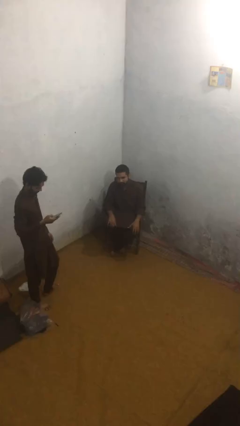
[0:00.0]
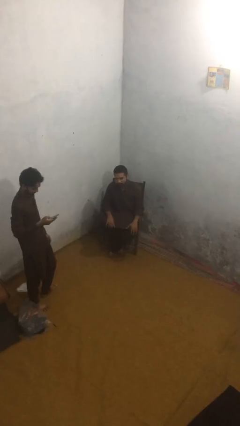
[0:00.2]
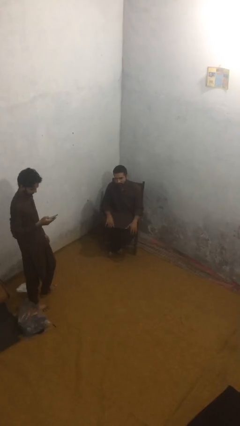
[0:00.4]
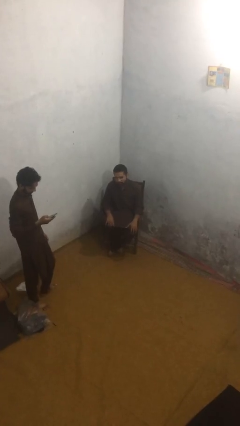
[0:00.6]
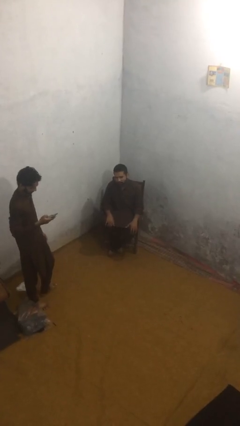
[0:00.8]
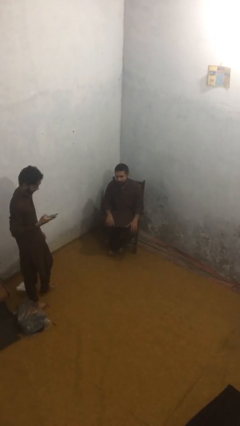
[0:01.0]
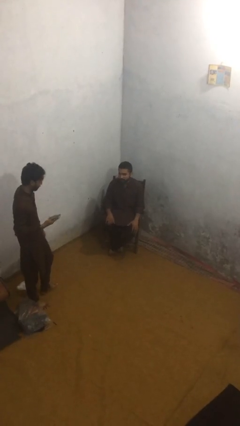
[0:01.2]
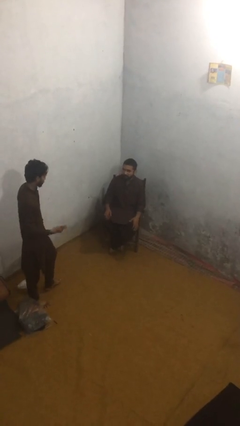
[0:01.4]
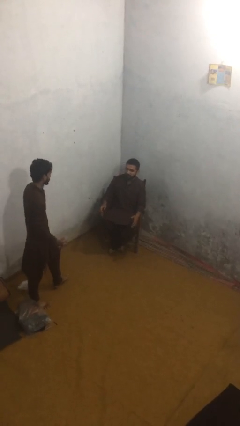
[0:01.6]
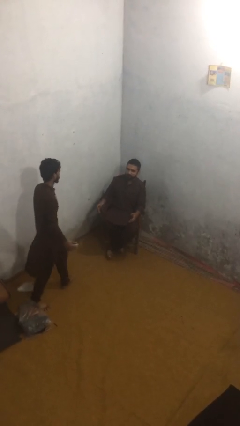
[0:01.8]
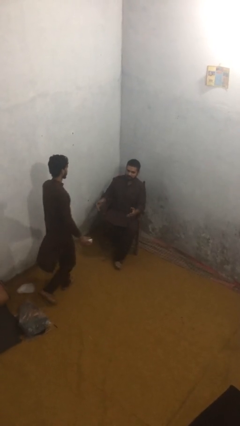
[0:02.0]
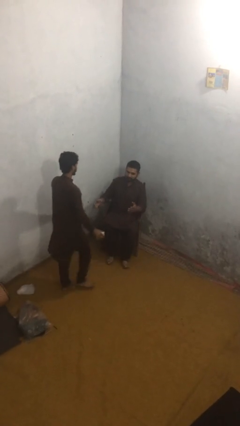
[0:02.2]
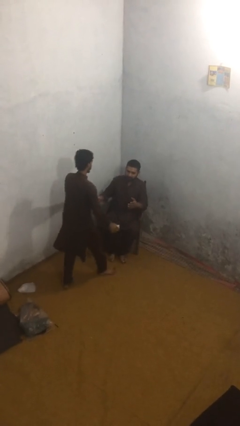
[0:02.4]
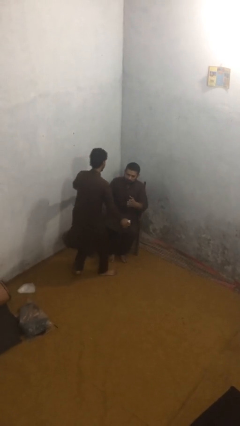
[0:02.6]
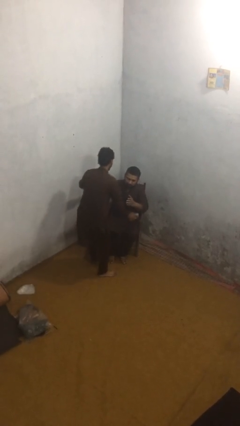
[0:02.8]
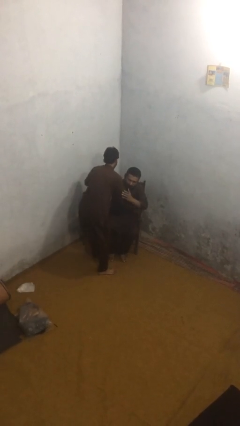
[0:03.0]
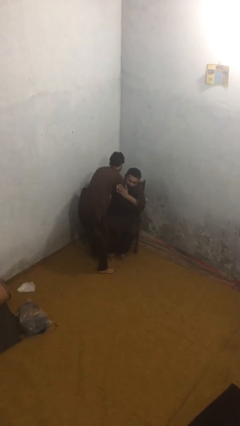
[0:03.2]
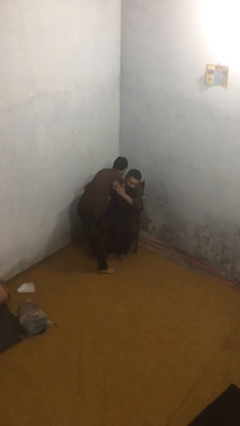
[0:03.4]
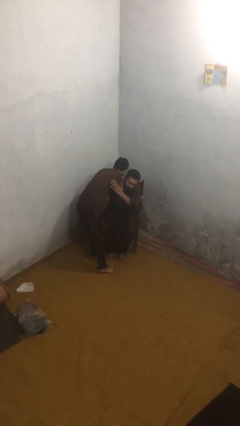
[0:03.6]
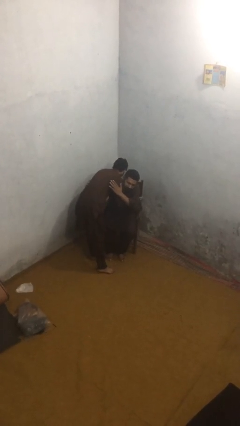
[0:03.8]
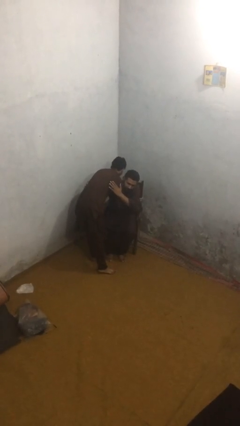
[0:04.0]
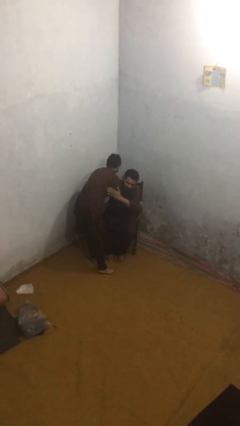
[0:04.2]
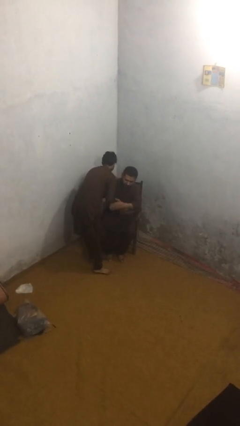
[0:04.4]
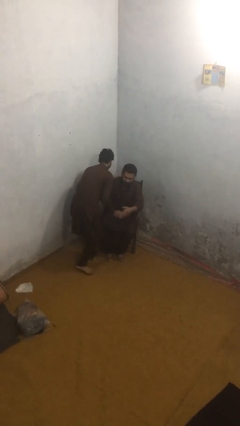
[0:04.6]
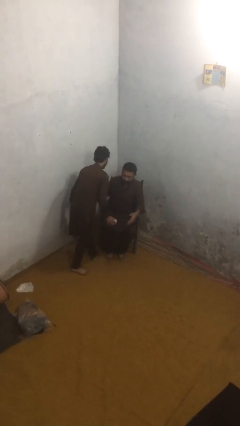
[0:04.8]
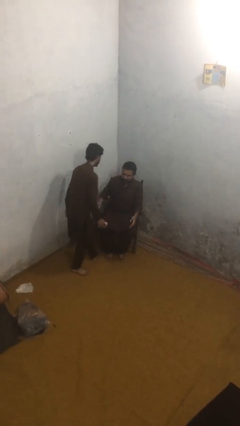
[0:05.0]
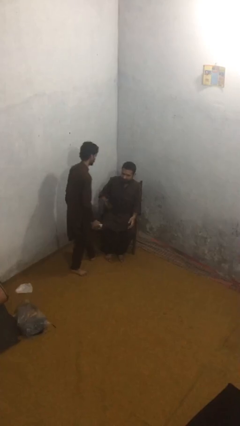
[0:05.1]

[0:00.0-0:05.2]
person embraces person

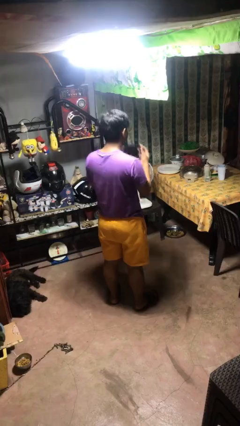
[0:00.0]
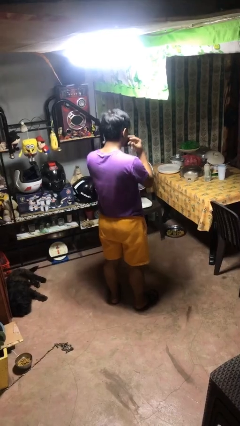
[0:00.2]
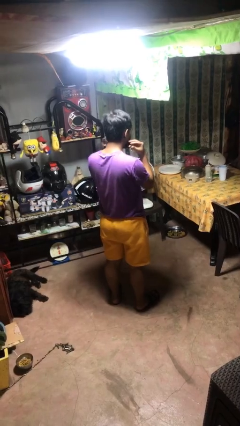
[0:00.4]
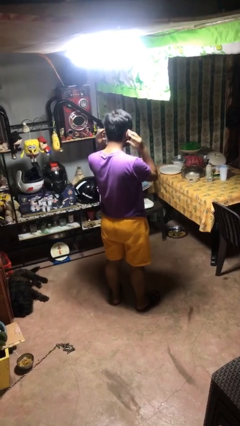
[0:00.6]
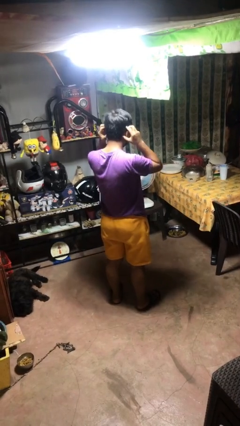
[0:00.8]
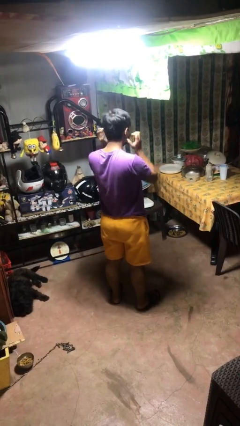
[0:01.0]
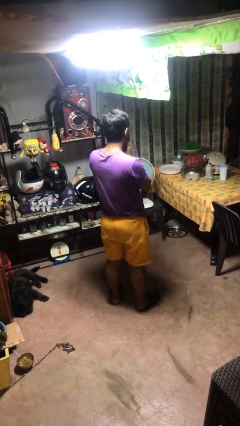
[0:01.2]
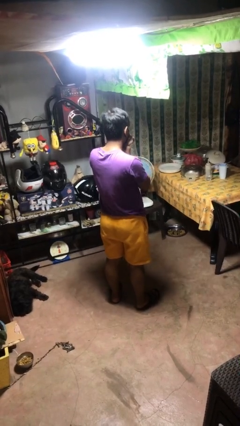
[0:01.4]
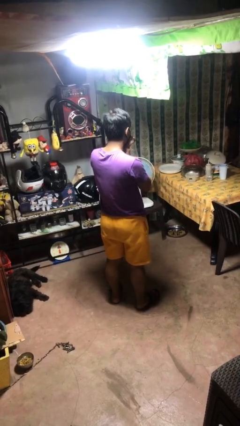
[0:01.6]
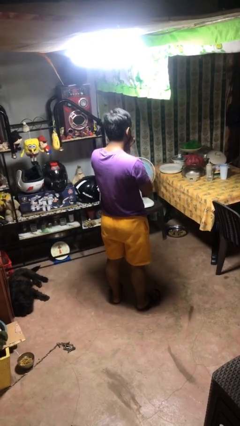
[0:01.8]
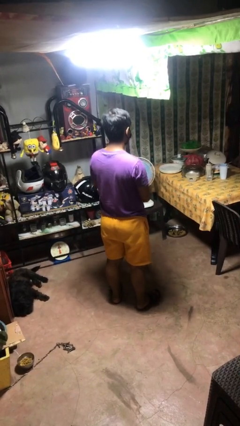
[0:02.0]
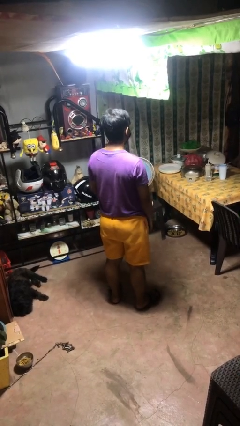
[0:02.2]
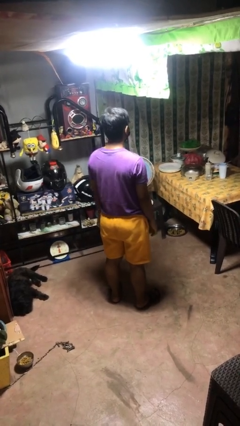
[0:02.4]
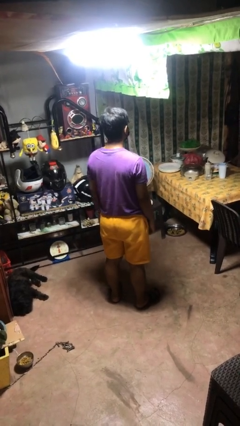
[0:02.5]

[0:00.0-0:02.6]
person puts on facemask

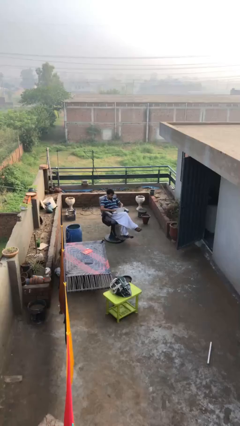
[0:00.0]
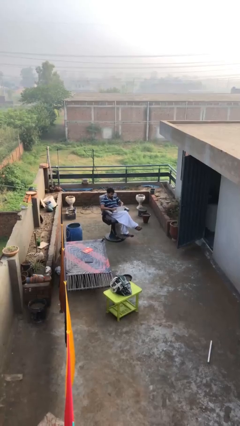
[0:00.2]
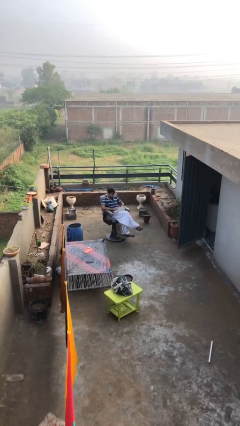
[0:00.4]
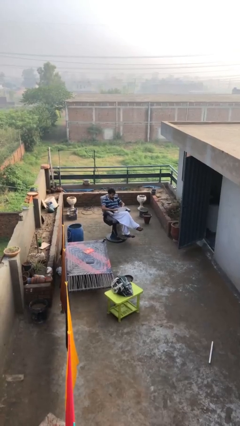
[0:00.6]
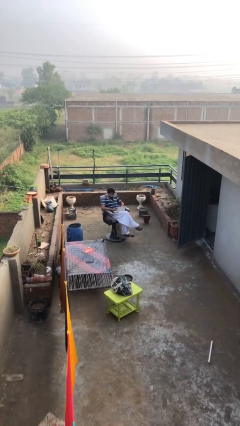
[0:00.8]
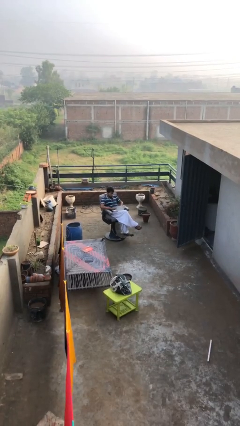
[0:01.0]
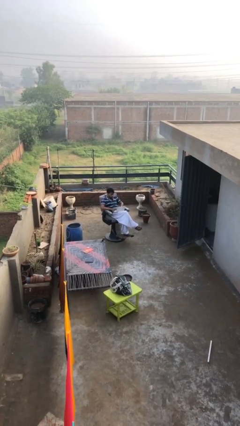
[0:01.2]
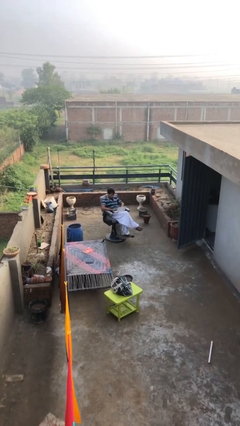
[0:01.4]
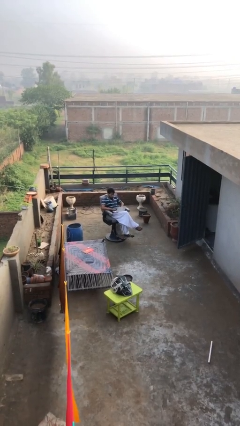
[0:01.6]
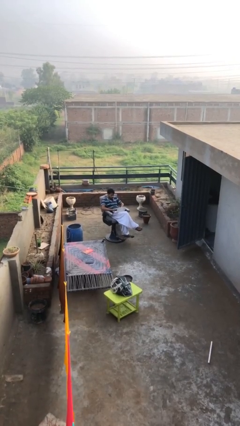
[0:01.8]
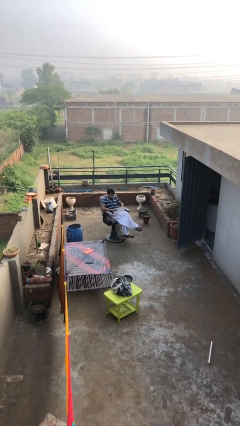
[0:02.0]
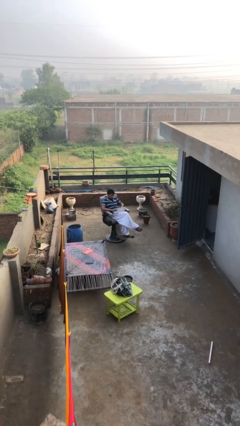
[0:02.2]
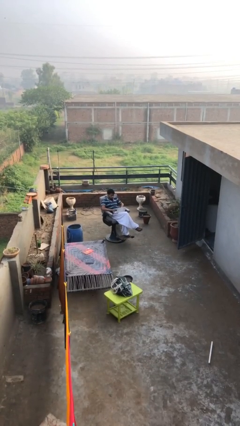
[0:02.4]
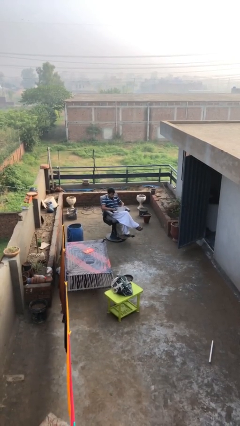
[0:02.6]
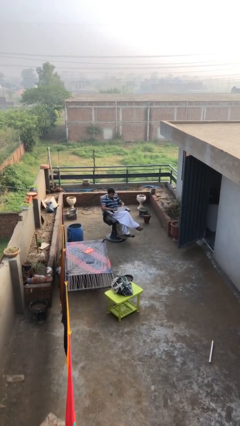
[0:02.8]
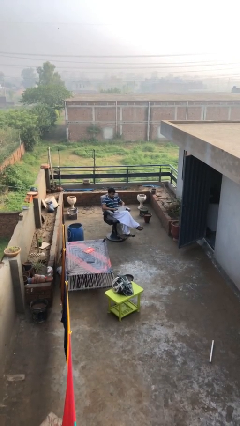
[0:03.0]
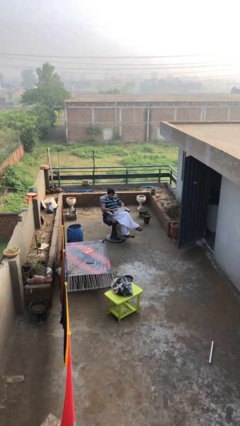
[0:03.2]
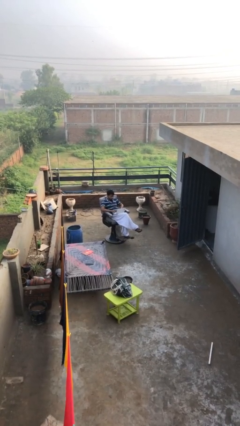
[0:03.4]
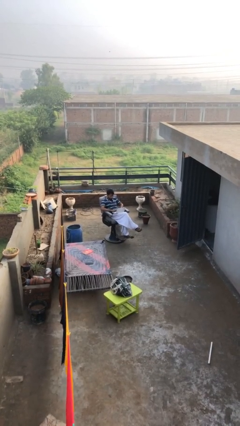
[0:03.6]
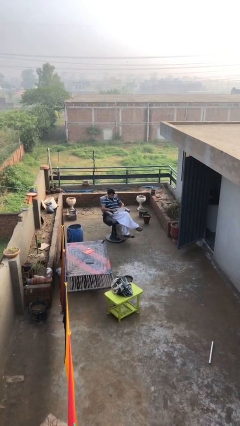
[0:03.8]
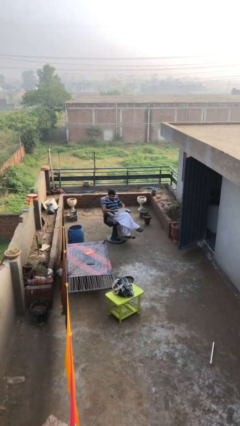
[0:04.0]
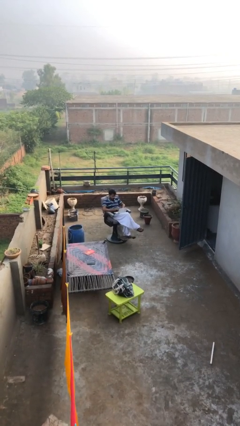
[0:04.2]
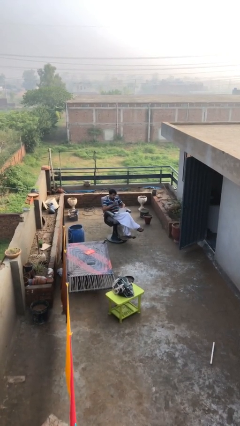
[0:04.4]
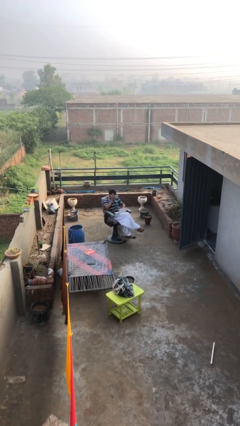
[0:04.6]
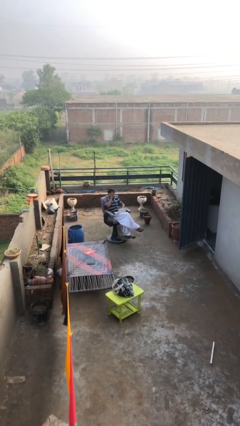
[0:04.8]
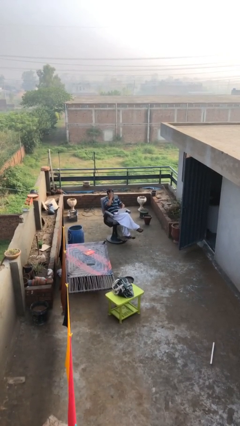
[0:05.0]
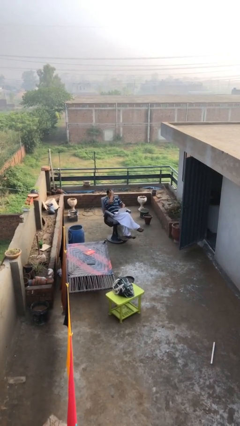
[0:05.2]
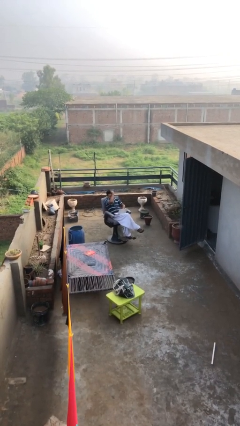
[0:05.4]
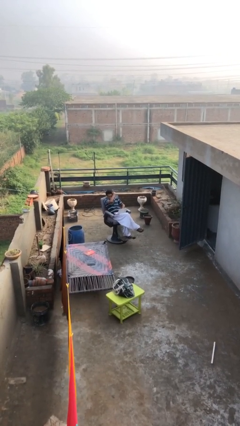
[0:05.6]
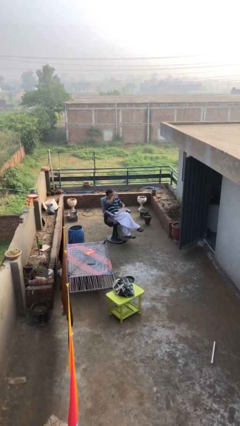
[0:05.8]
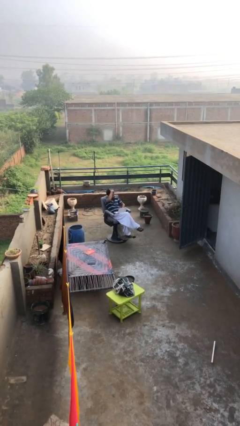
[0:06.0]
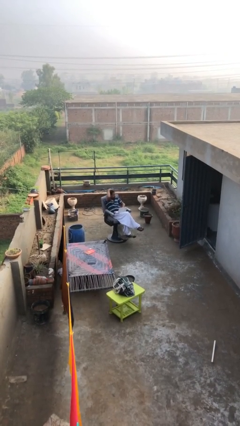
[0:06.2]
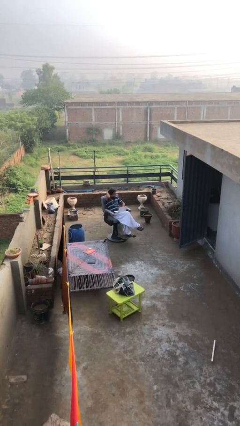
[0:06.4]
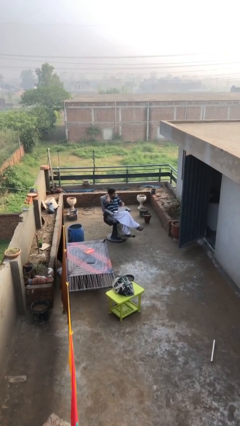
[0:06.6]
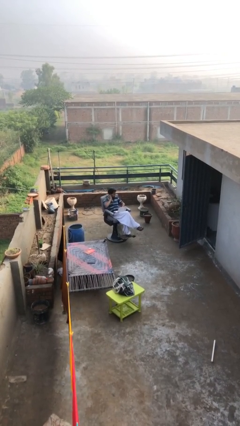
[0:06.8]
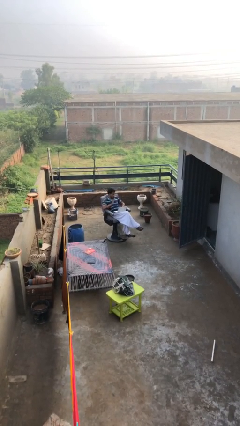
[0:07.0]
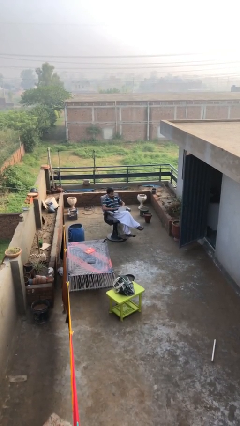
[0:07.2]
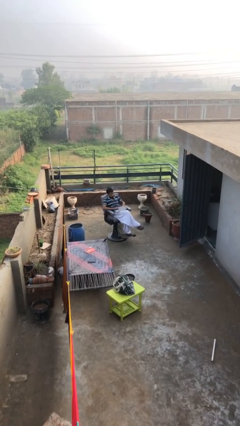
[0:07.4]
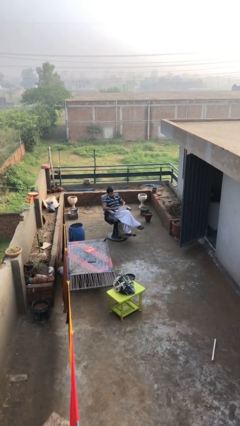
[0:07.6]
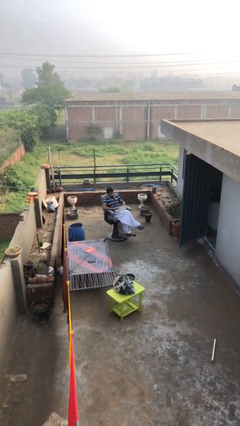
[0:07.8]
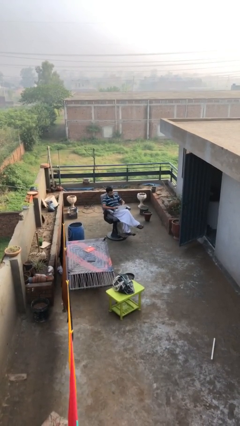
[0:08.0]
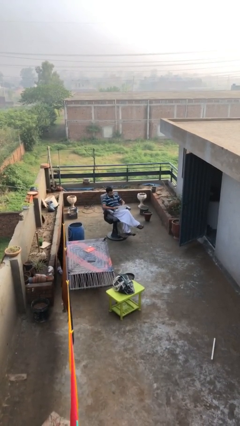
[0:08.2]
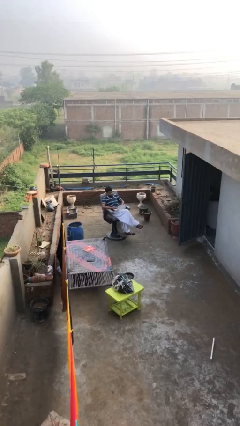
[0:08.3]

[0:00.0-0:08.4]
person interacts with laptop

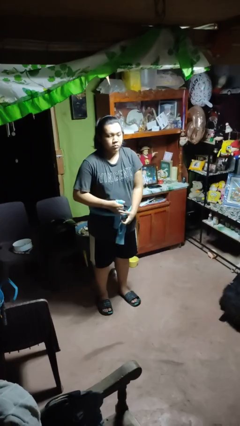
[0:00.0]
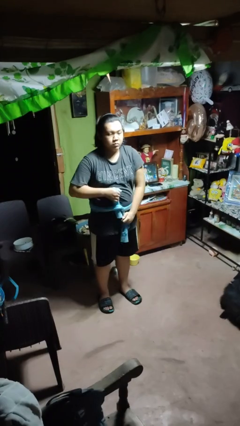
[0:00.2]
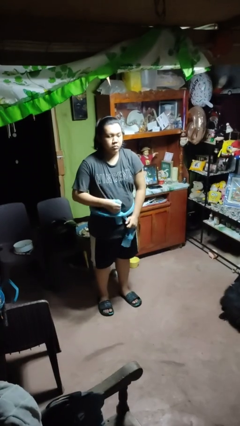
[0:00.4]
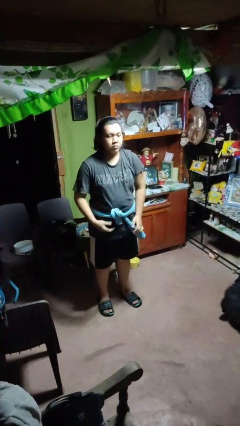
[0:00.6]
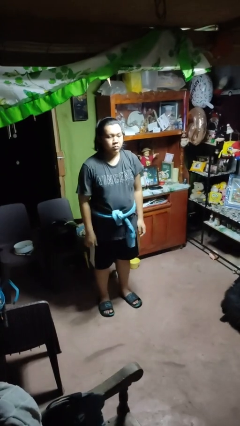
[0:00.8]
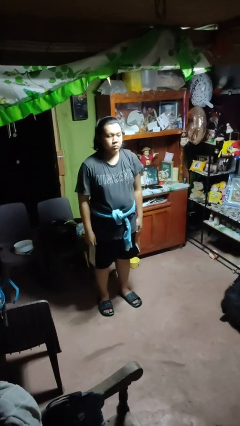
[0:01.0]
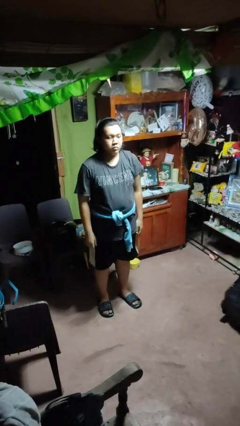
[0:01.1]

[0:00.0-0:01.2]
person ties jacket around waist

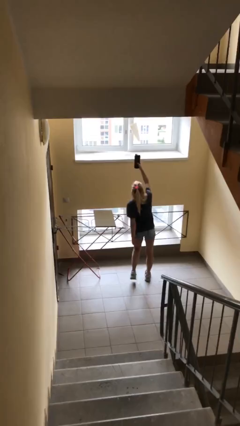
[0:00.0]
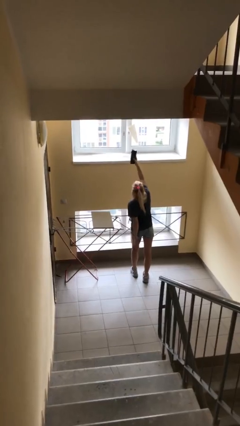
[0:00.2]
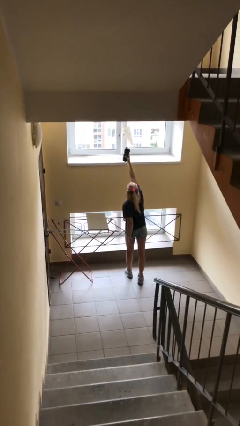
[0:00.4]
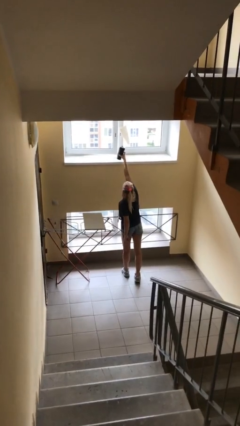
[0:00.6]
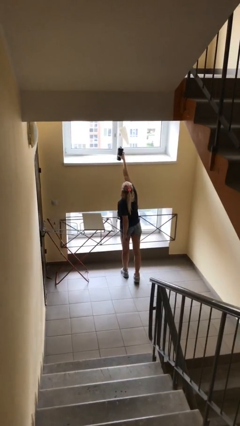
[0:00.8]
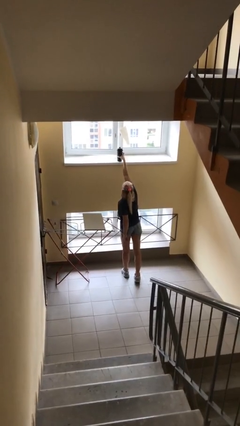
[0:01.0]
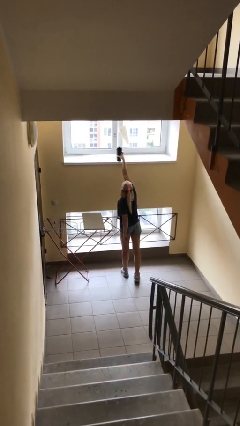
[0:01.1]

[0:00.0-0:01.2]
person puts down object on shelf
